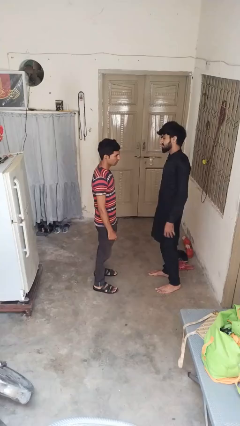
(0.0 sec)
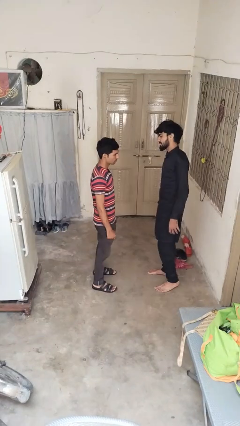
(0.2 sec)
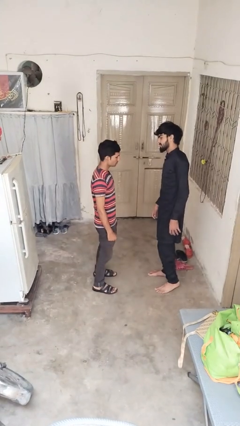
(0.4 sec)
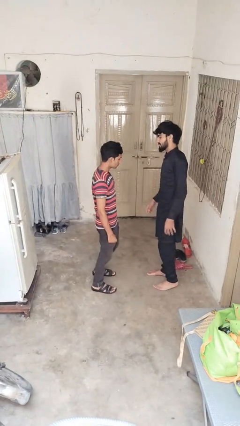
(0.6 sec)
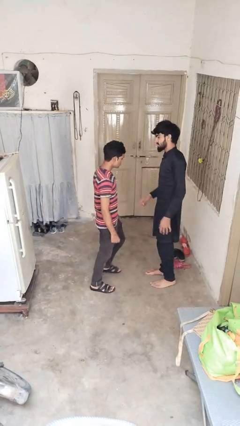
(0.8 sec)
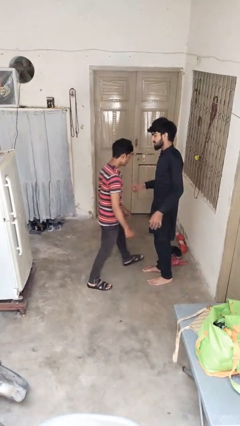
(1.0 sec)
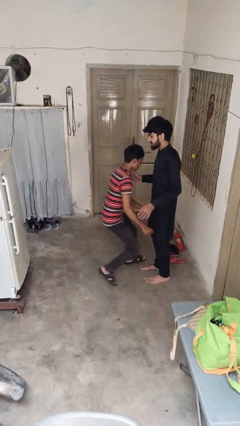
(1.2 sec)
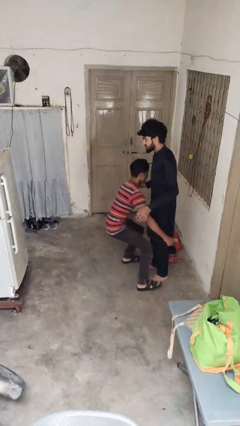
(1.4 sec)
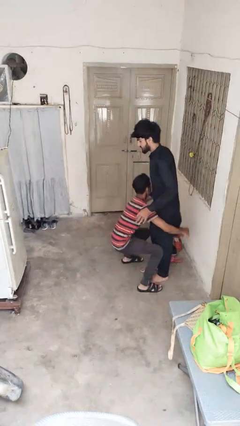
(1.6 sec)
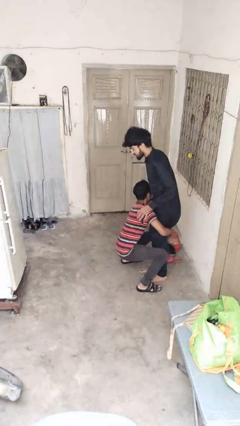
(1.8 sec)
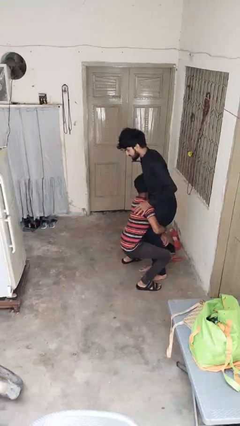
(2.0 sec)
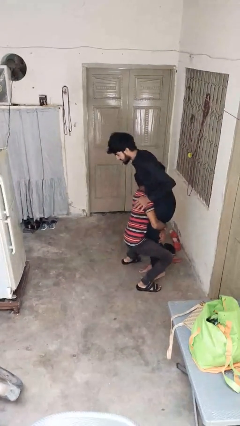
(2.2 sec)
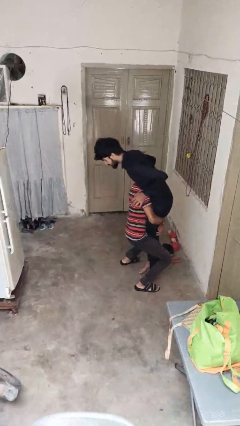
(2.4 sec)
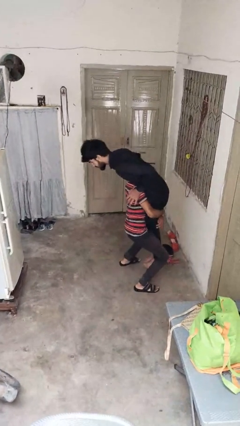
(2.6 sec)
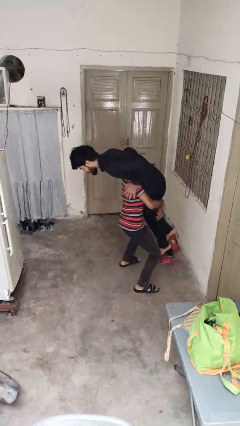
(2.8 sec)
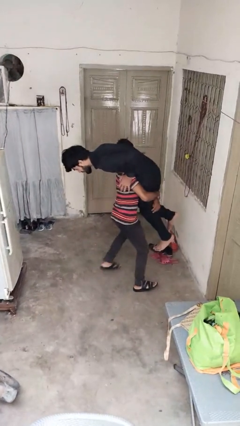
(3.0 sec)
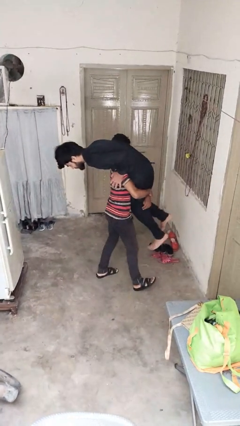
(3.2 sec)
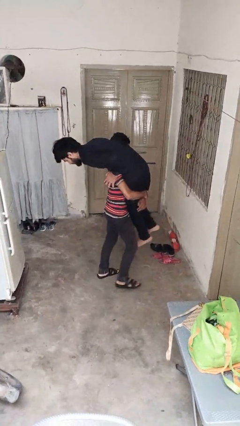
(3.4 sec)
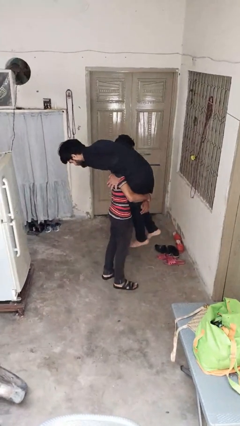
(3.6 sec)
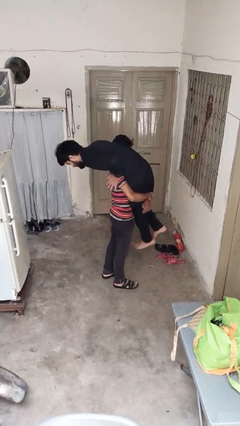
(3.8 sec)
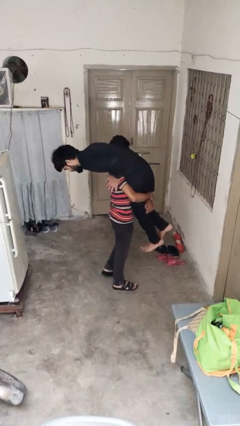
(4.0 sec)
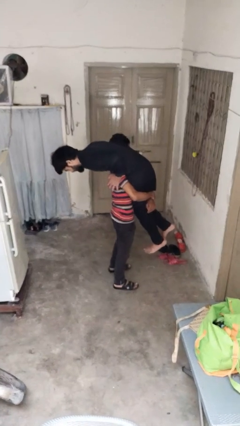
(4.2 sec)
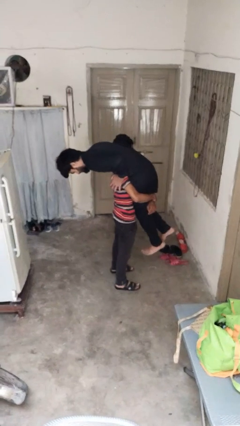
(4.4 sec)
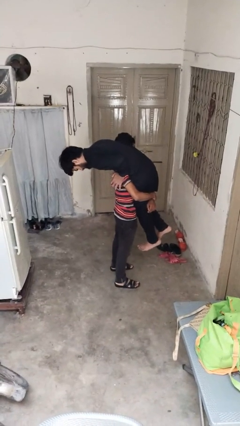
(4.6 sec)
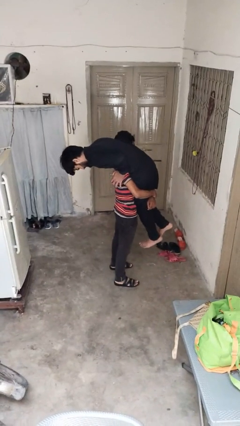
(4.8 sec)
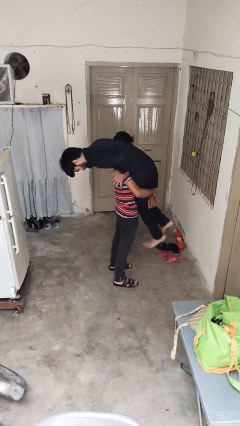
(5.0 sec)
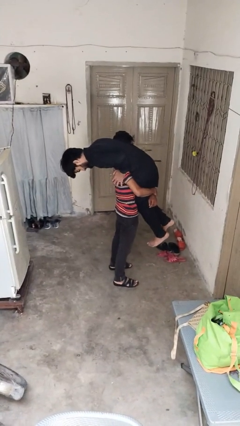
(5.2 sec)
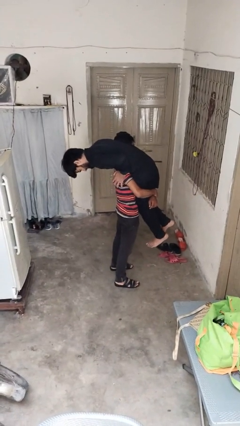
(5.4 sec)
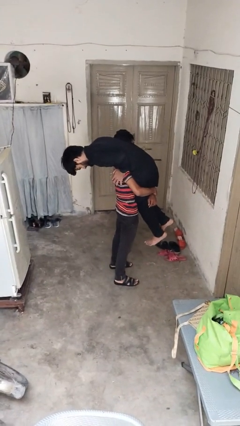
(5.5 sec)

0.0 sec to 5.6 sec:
person carries person over shoulder

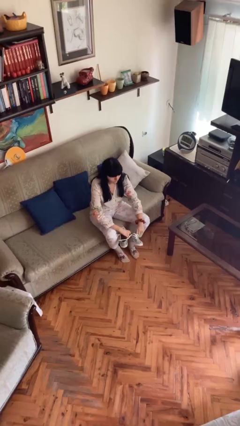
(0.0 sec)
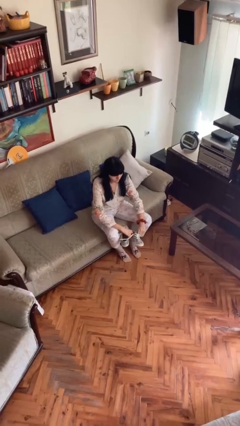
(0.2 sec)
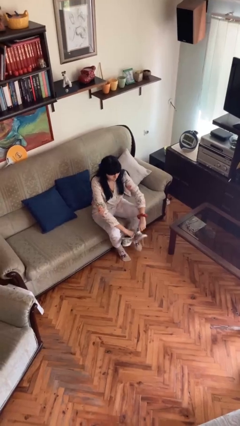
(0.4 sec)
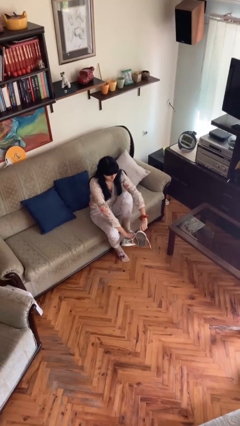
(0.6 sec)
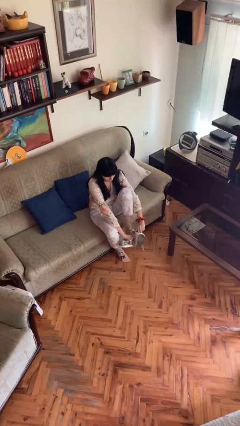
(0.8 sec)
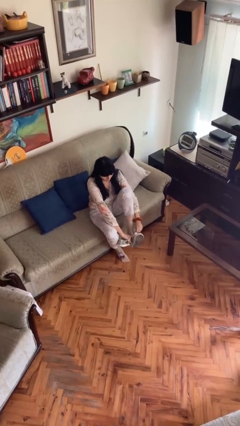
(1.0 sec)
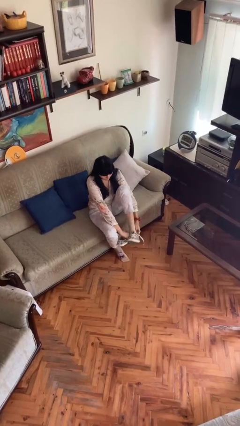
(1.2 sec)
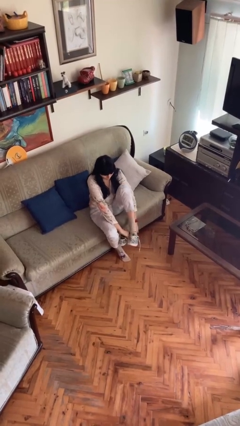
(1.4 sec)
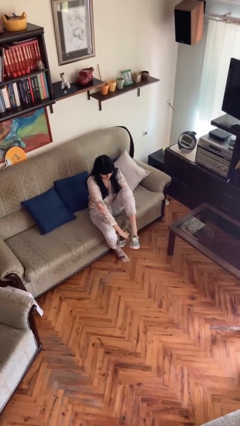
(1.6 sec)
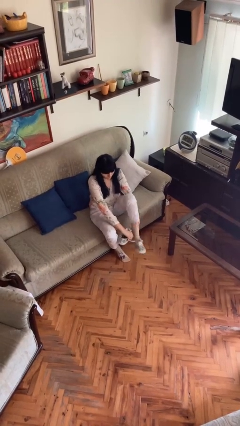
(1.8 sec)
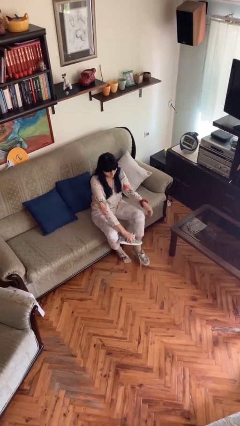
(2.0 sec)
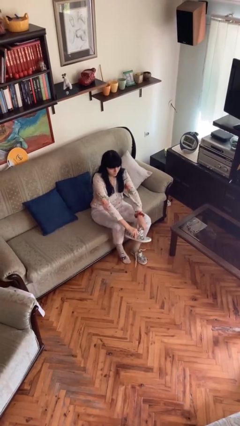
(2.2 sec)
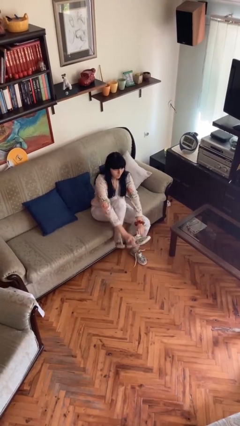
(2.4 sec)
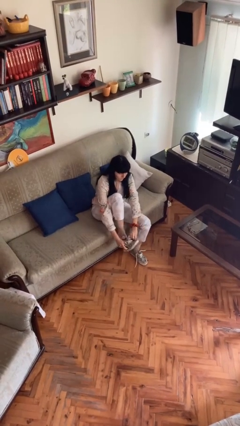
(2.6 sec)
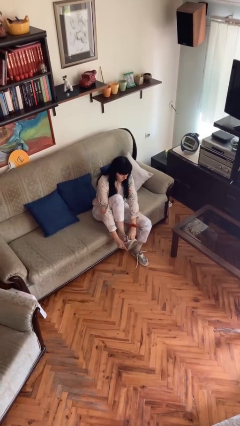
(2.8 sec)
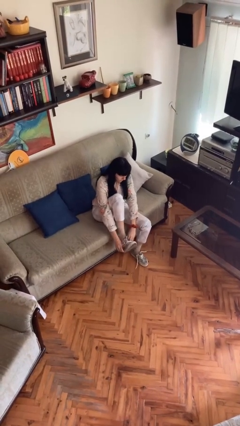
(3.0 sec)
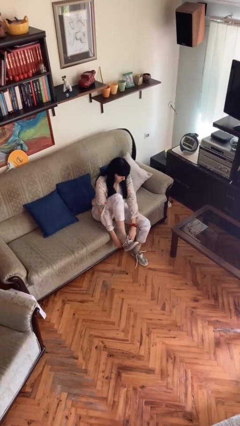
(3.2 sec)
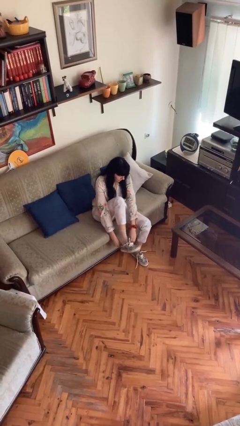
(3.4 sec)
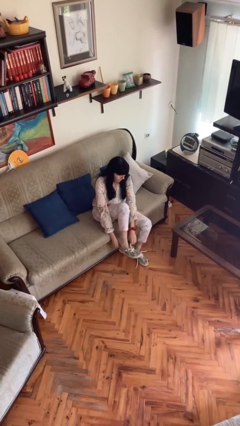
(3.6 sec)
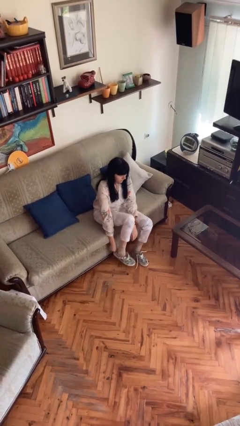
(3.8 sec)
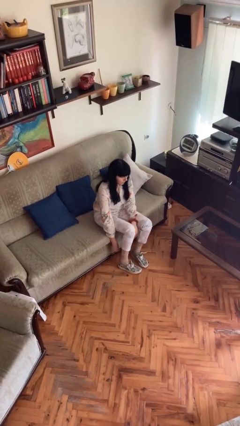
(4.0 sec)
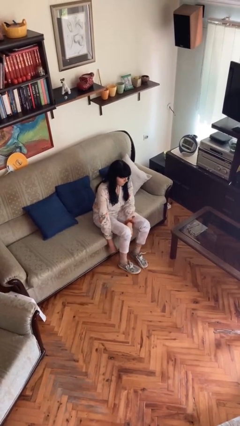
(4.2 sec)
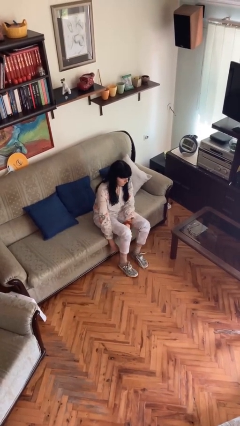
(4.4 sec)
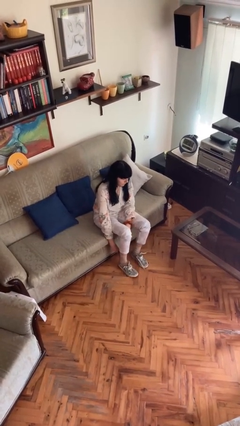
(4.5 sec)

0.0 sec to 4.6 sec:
person puts on shoes

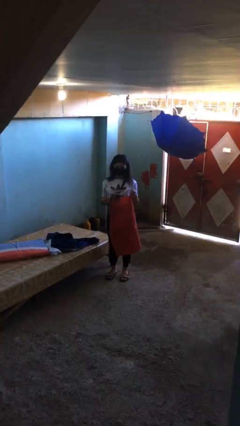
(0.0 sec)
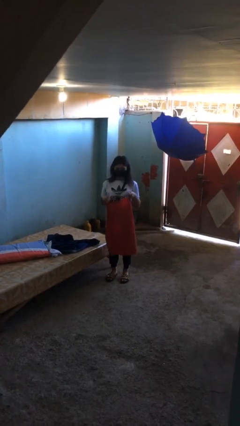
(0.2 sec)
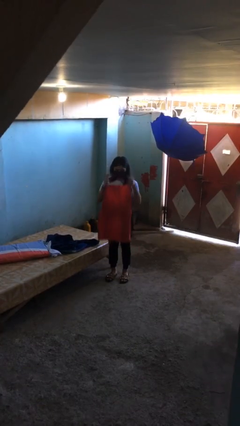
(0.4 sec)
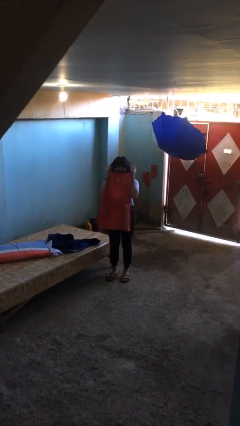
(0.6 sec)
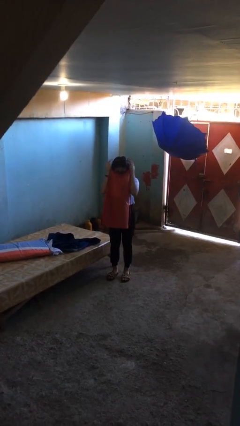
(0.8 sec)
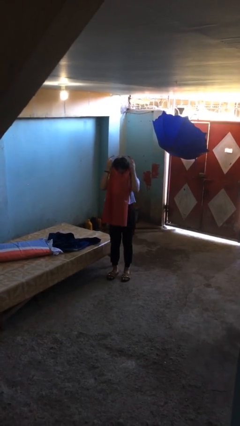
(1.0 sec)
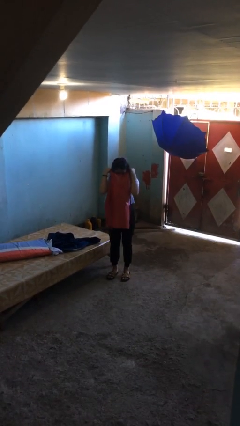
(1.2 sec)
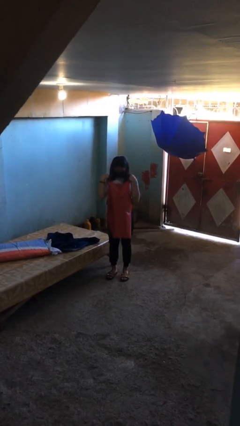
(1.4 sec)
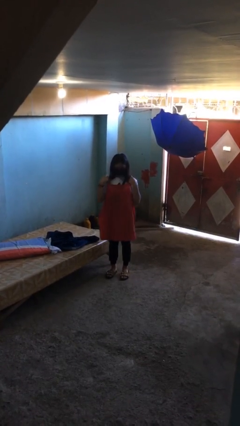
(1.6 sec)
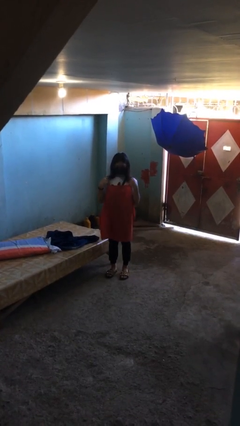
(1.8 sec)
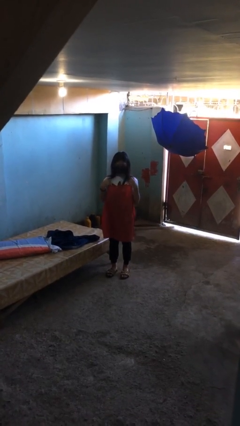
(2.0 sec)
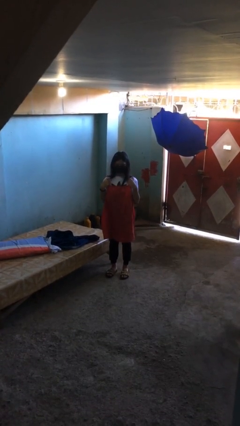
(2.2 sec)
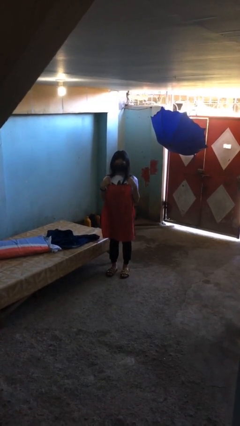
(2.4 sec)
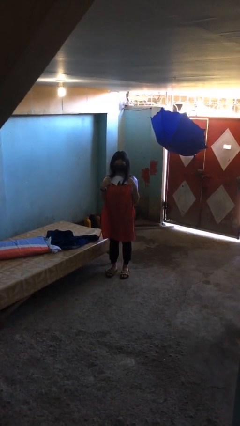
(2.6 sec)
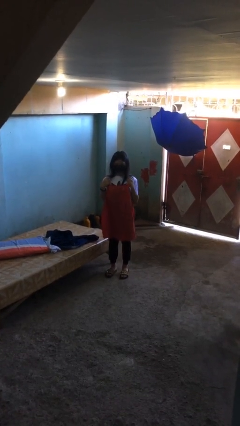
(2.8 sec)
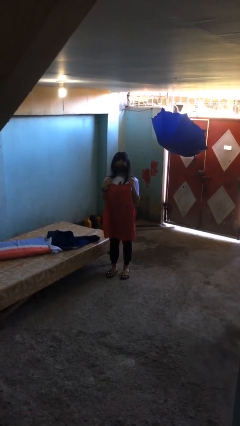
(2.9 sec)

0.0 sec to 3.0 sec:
person puts on apron

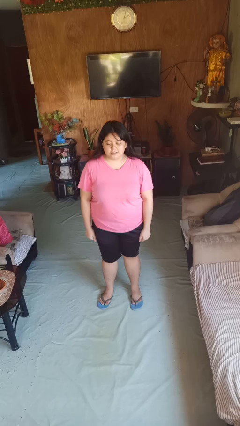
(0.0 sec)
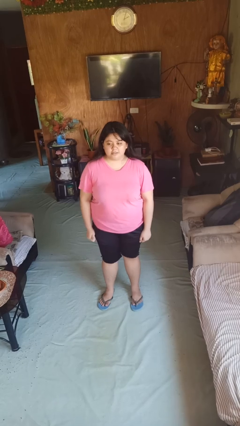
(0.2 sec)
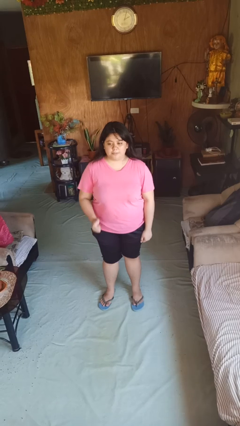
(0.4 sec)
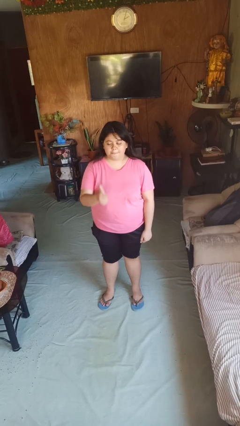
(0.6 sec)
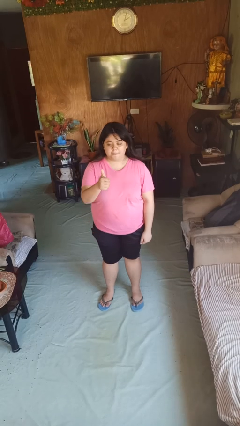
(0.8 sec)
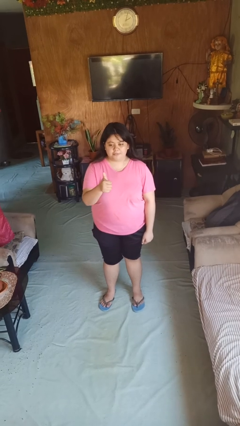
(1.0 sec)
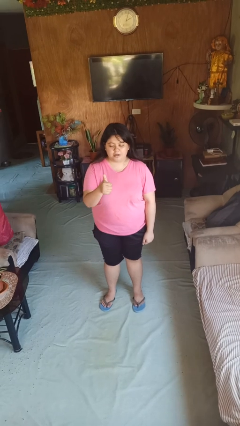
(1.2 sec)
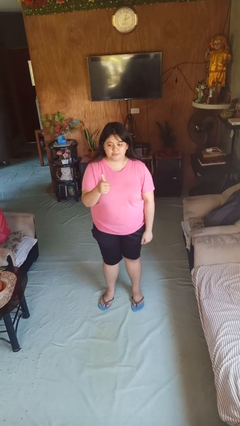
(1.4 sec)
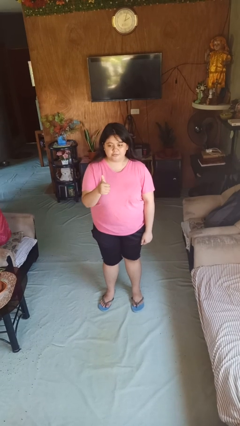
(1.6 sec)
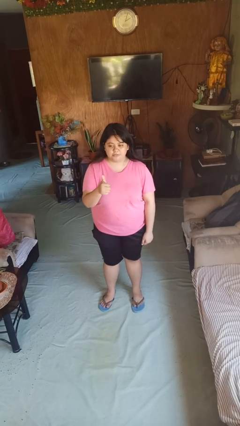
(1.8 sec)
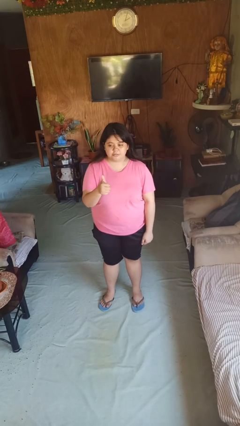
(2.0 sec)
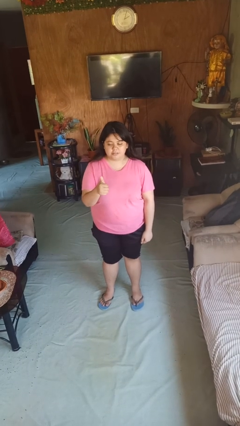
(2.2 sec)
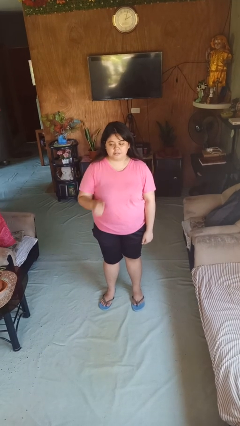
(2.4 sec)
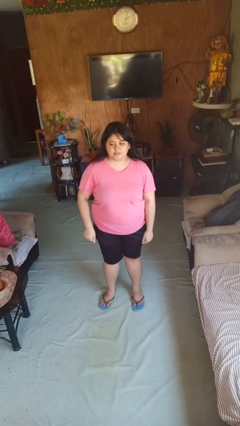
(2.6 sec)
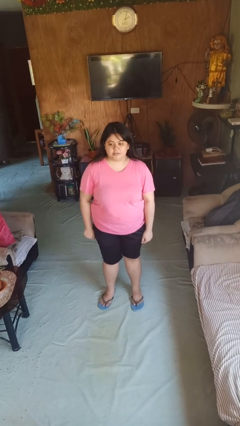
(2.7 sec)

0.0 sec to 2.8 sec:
person gestures thumbs up

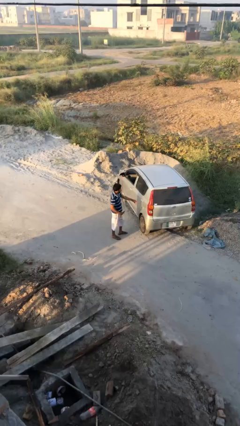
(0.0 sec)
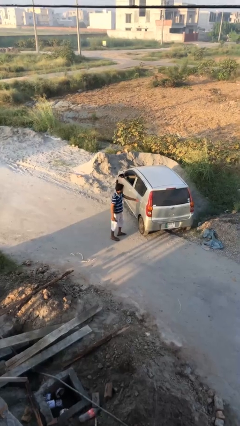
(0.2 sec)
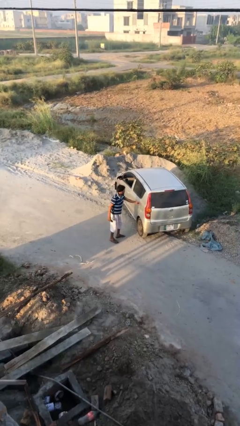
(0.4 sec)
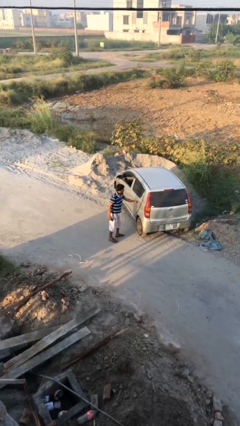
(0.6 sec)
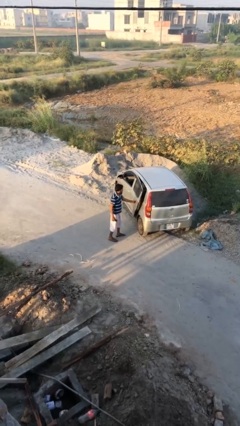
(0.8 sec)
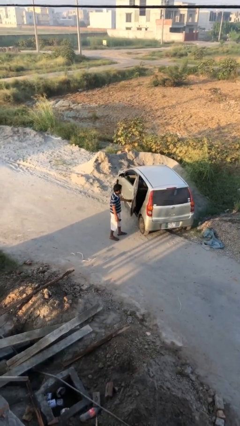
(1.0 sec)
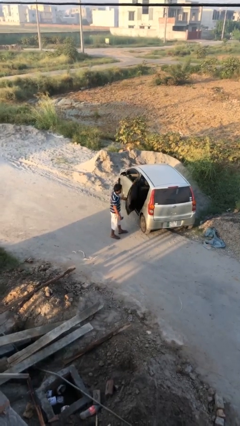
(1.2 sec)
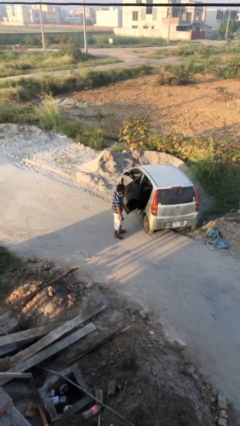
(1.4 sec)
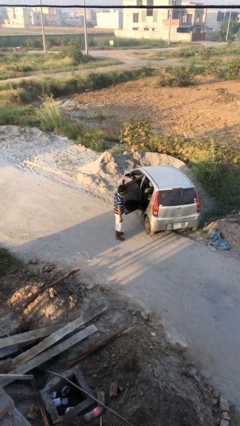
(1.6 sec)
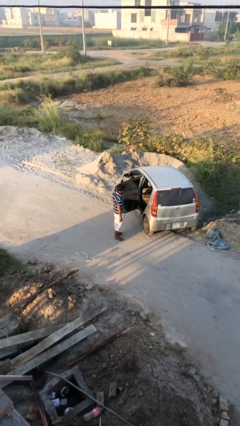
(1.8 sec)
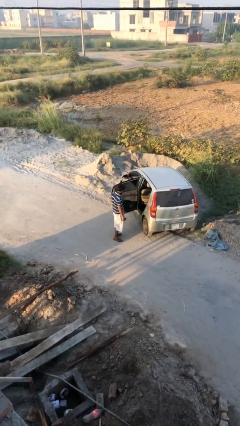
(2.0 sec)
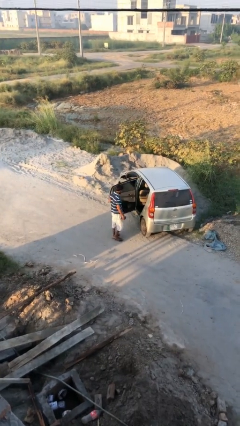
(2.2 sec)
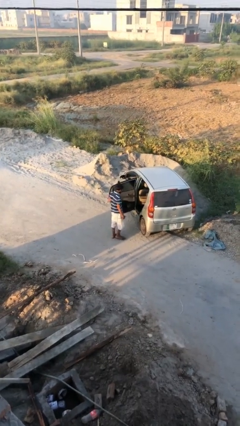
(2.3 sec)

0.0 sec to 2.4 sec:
person opens car door
